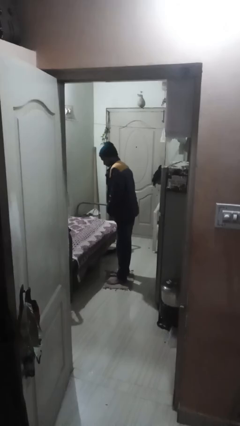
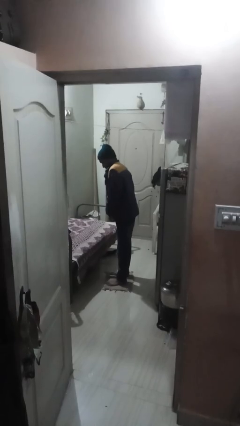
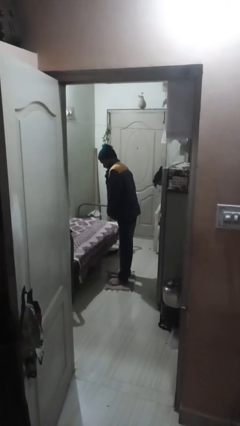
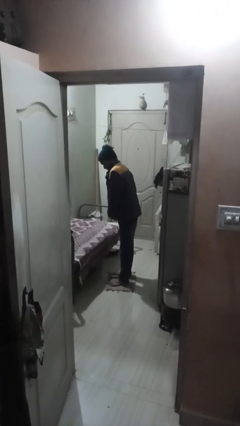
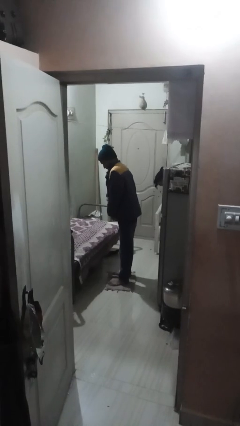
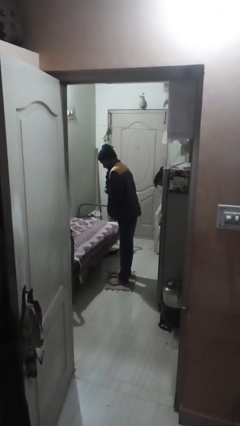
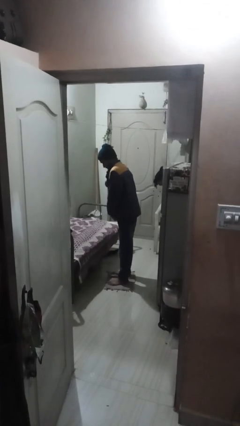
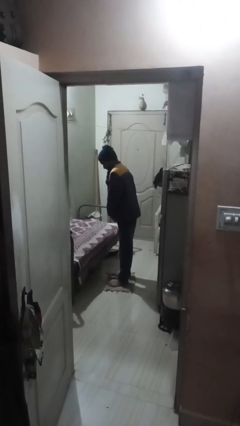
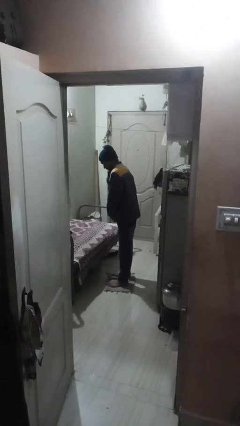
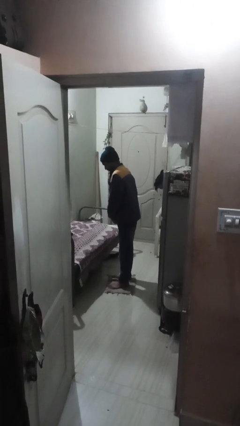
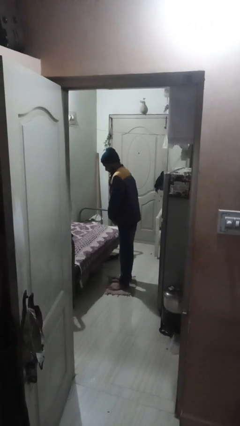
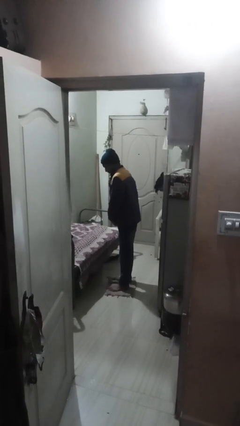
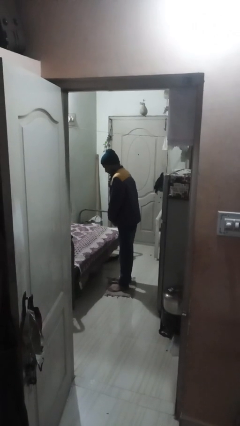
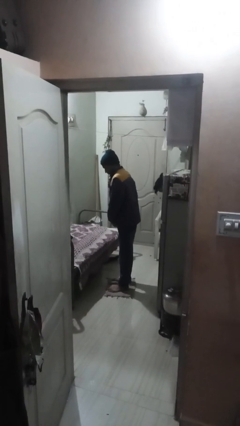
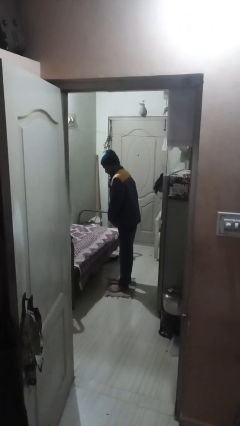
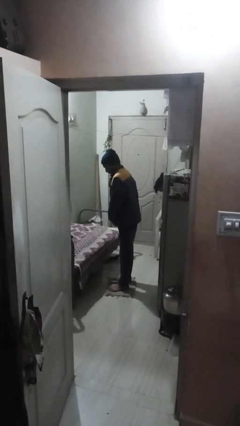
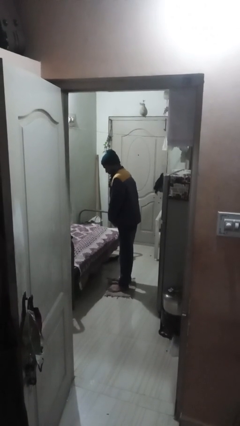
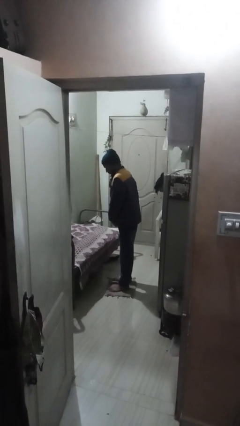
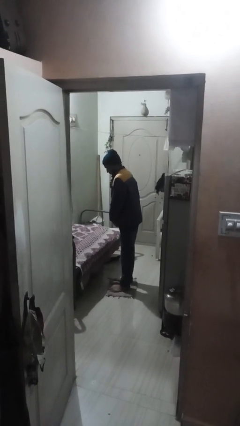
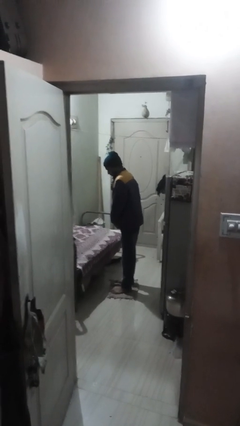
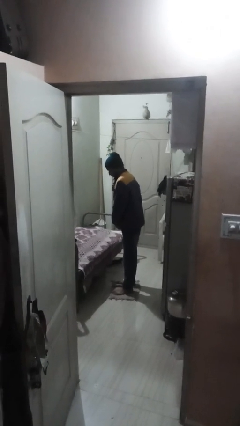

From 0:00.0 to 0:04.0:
person zips up jacket

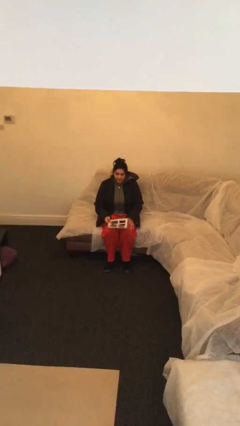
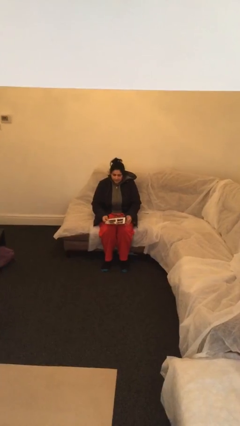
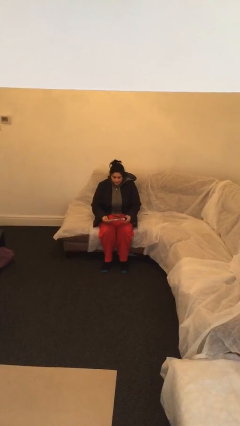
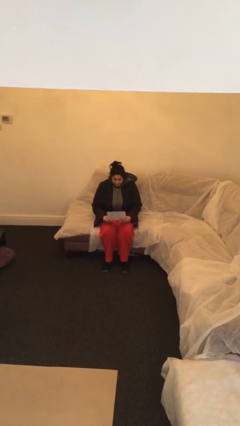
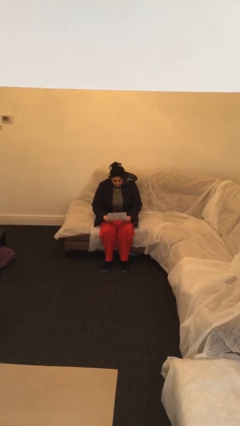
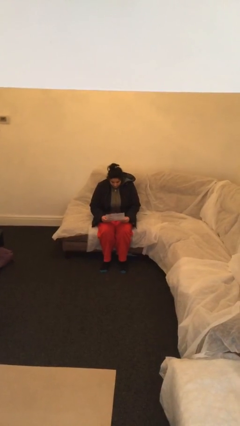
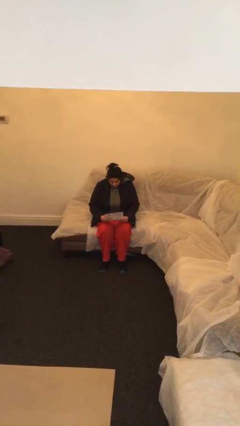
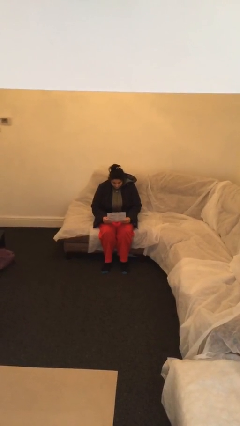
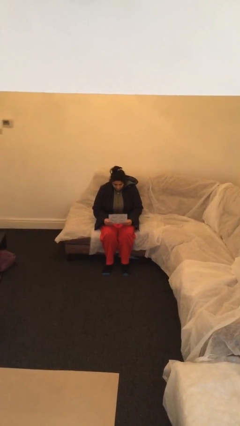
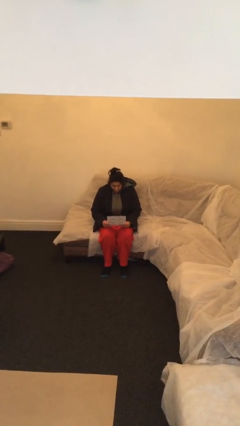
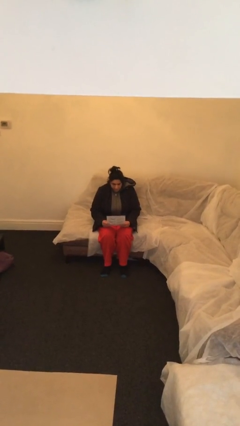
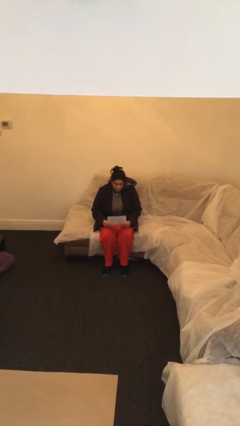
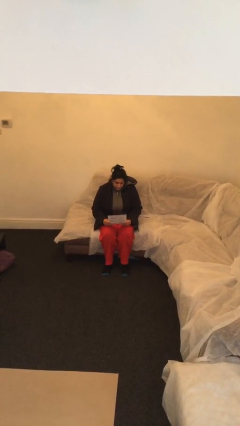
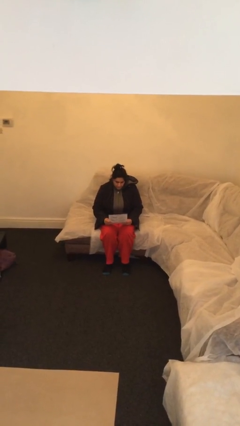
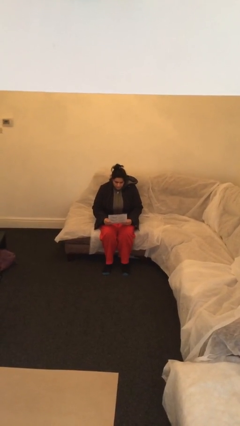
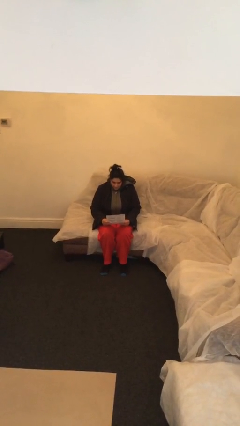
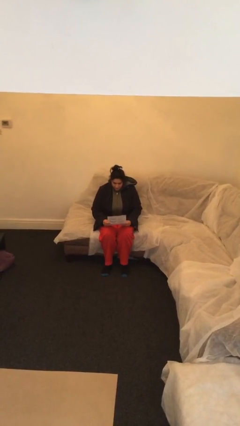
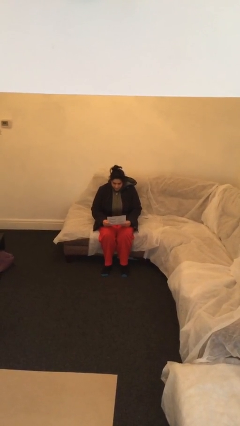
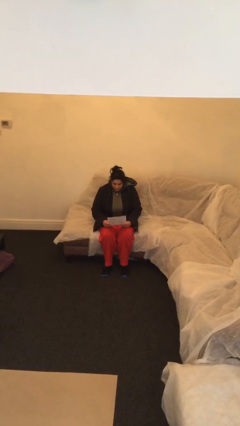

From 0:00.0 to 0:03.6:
person reads document

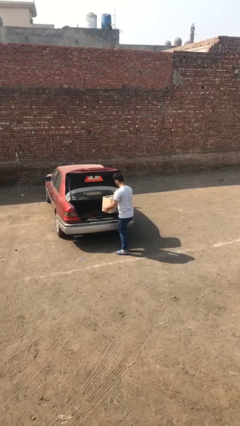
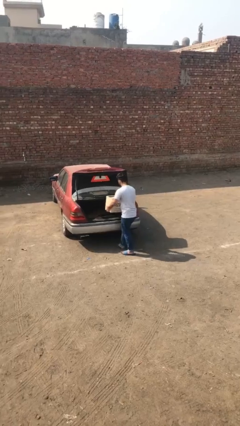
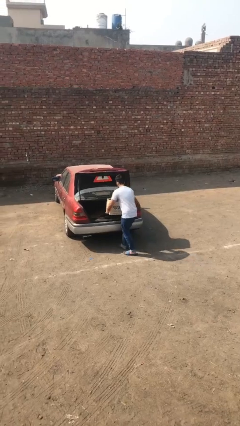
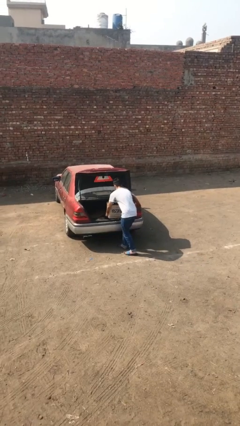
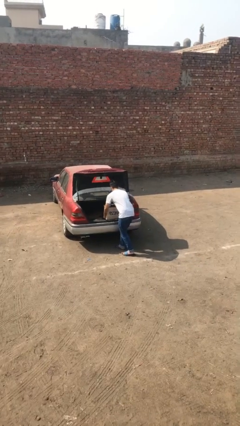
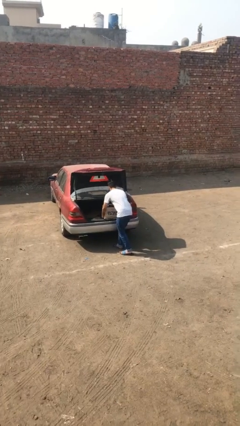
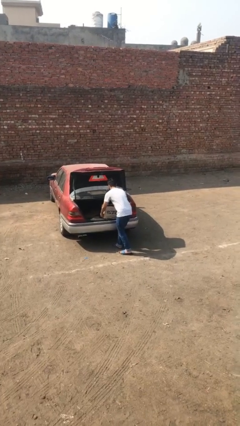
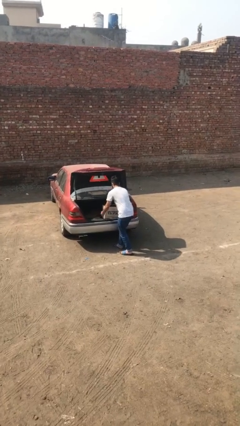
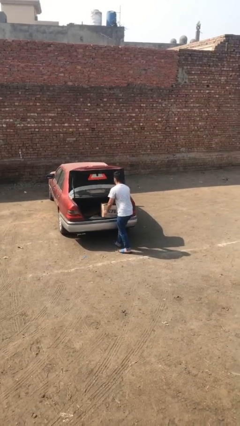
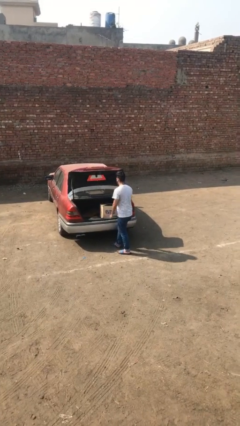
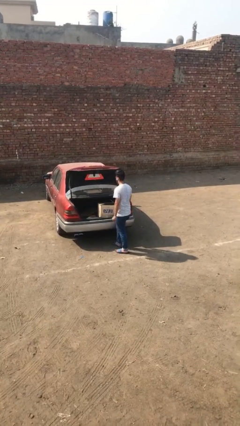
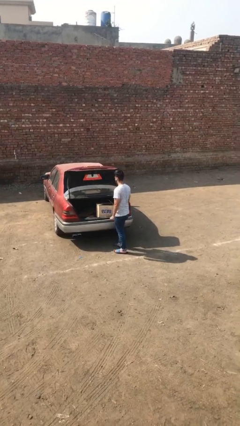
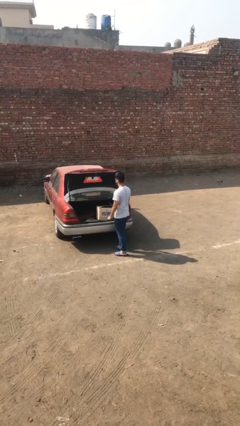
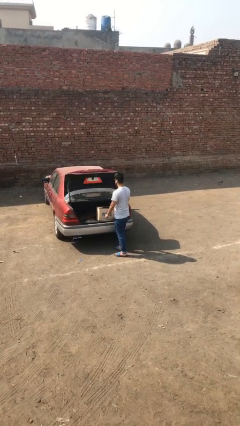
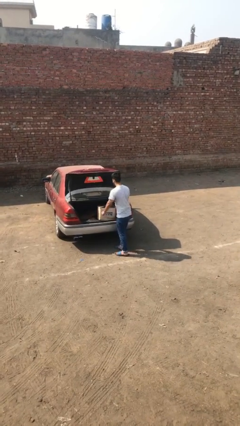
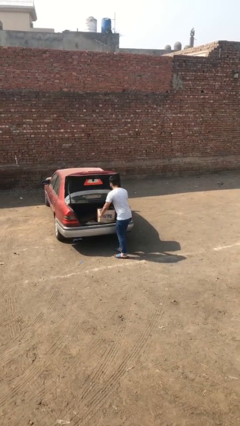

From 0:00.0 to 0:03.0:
person loads car

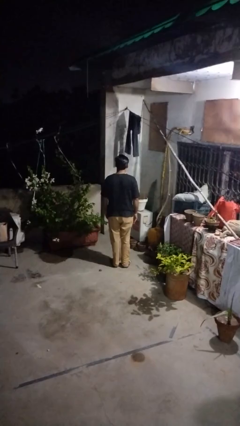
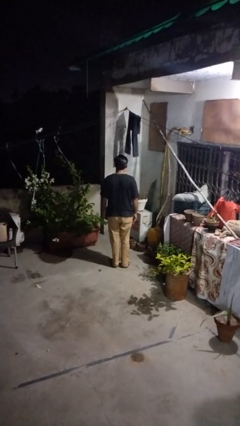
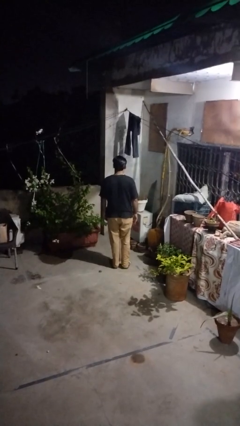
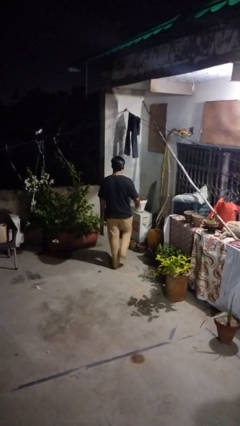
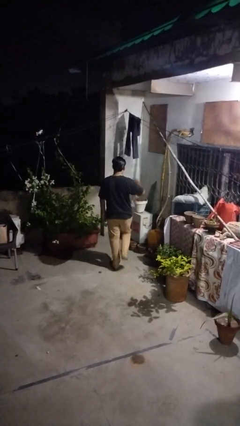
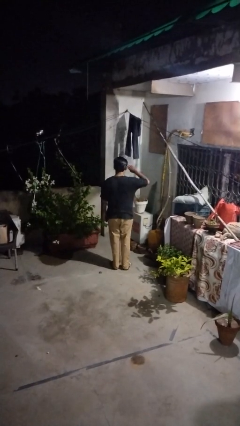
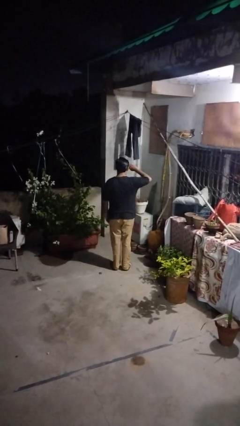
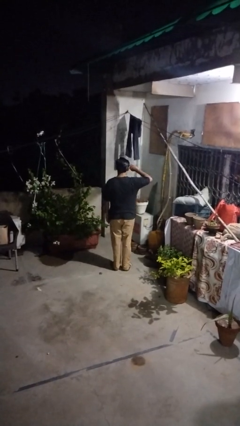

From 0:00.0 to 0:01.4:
person salutes

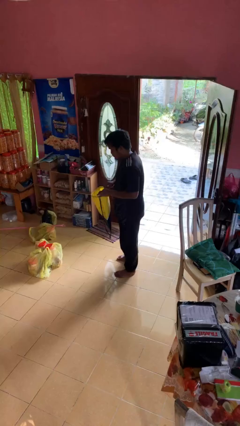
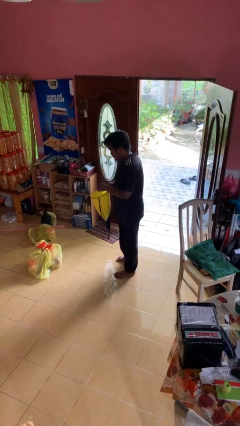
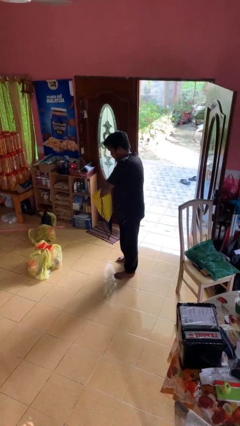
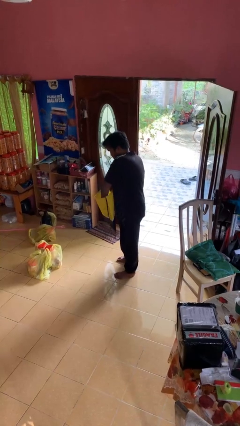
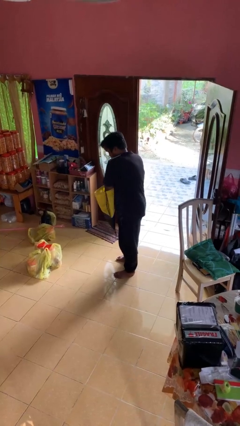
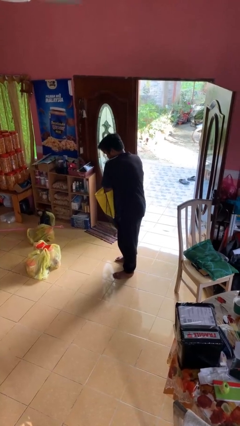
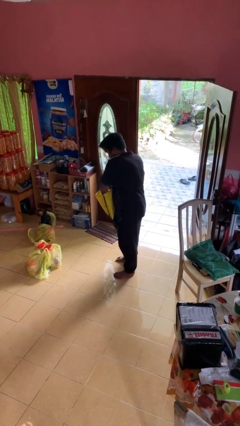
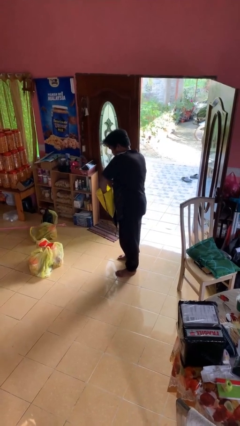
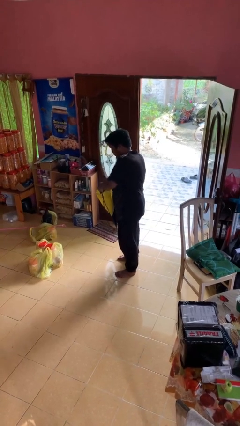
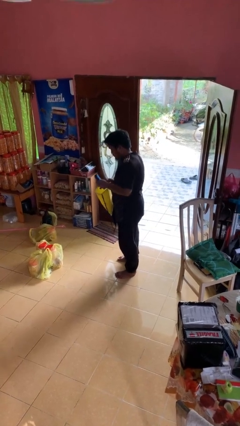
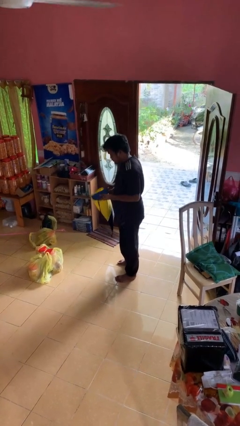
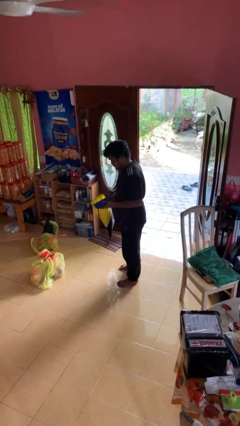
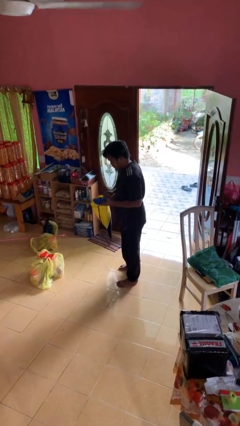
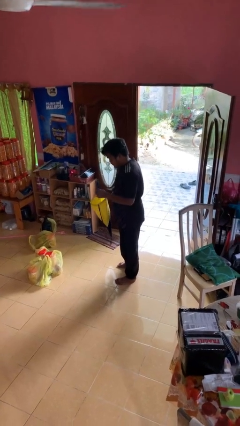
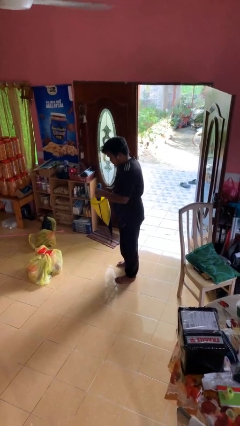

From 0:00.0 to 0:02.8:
person takes object from bag

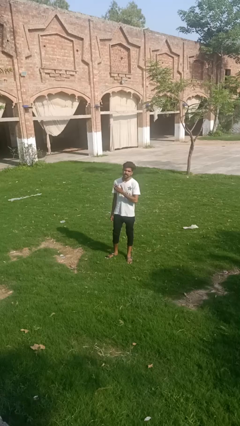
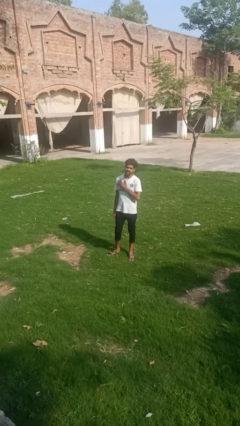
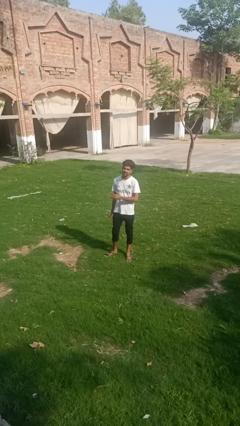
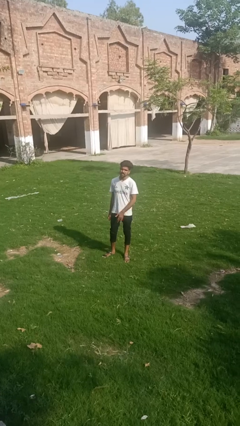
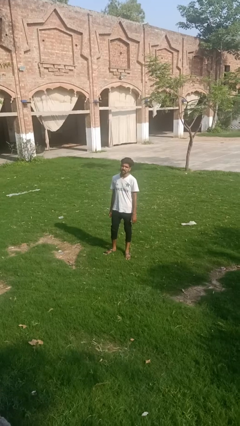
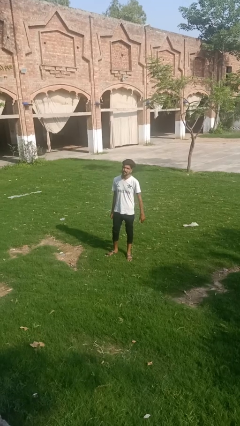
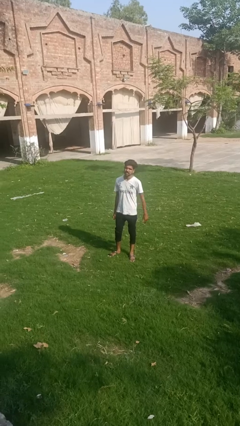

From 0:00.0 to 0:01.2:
person drums on chest

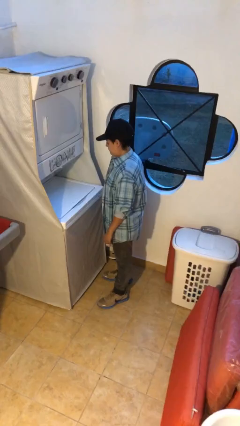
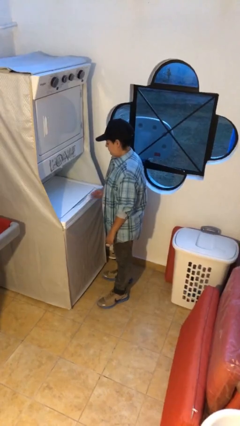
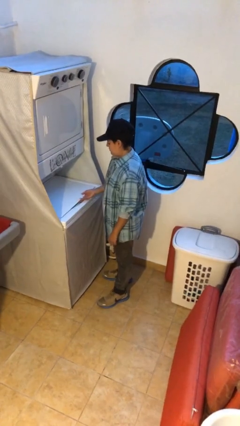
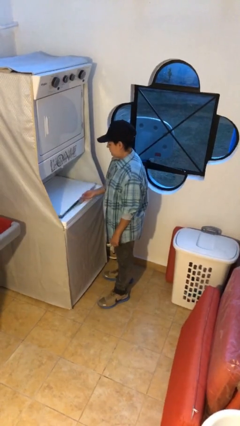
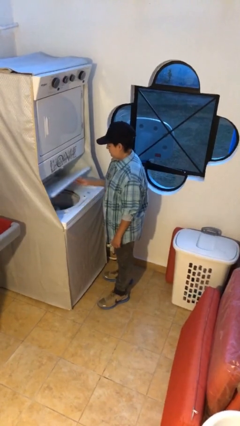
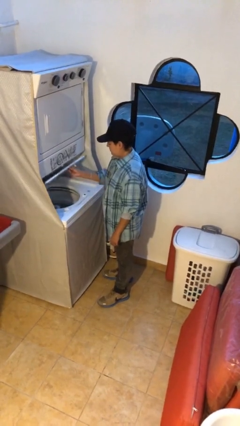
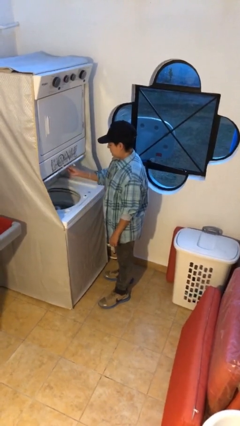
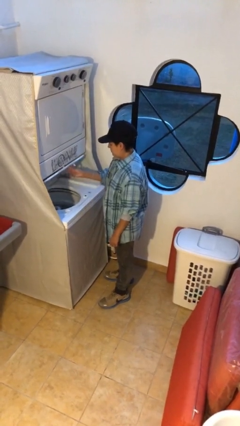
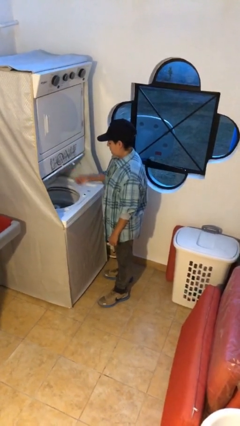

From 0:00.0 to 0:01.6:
person opens clothes washer
